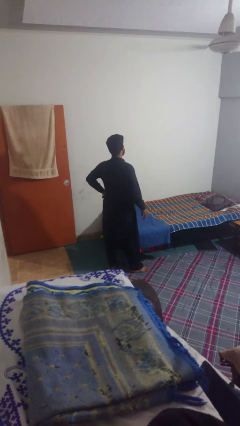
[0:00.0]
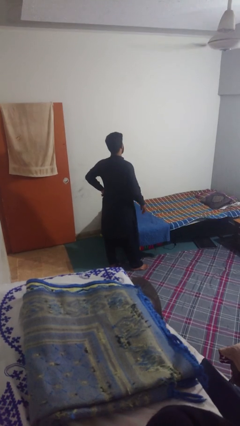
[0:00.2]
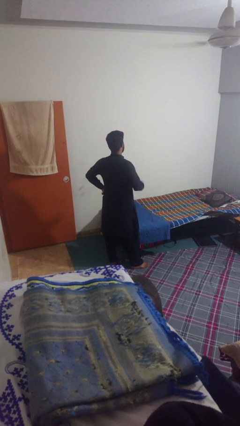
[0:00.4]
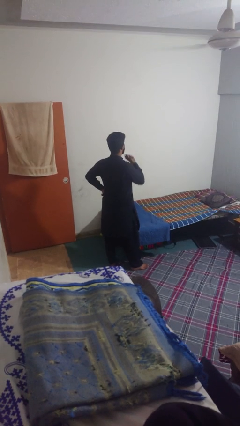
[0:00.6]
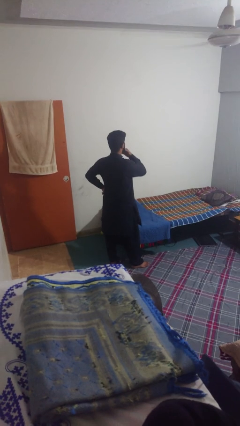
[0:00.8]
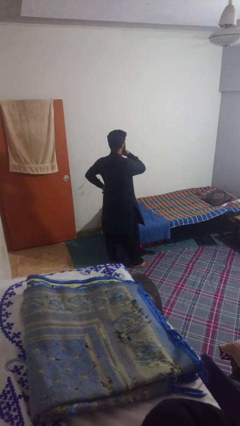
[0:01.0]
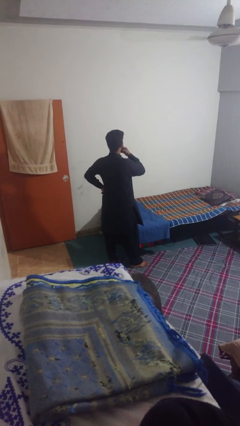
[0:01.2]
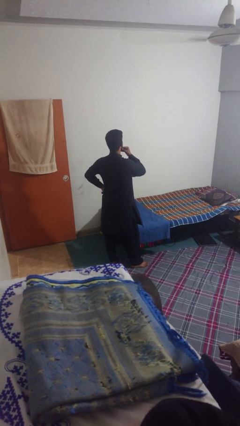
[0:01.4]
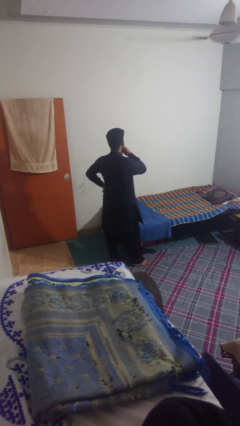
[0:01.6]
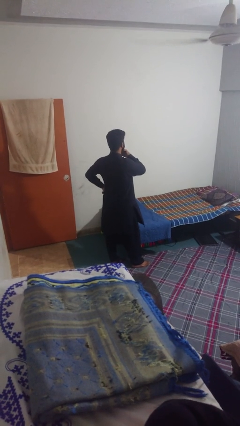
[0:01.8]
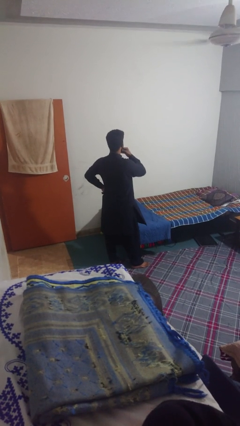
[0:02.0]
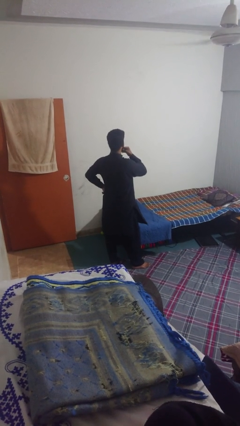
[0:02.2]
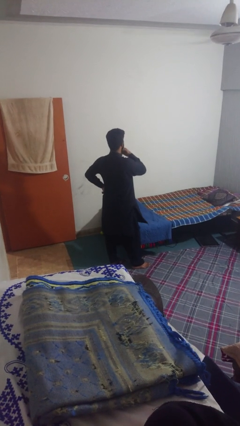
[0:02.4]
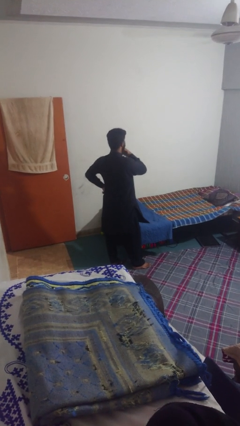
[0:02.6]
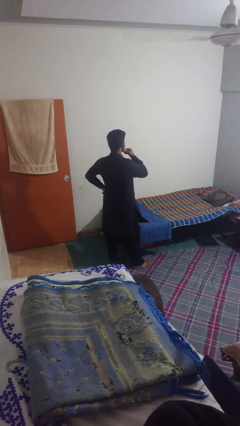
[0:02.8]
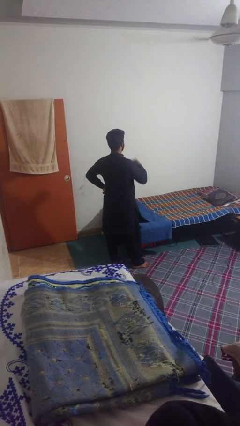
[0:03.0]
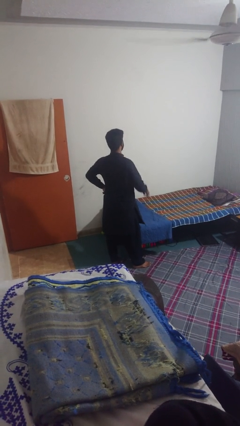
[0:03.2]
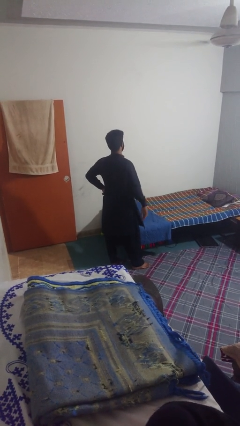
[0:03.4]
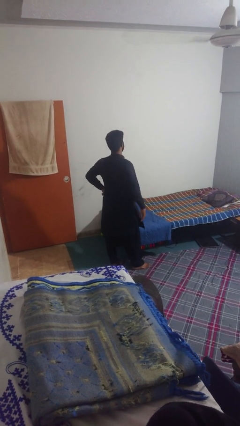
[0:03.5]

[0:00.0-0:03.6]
person strokes chin

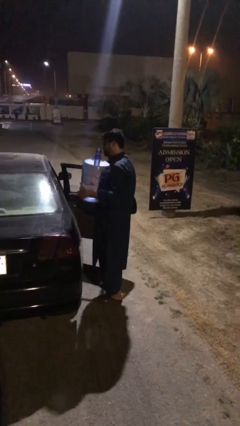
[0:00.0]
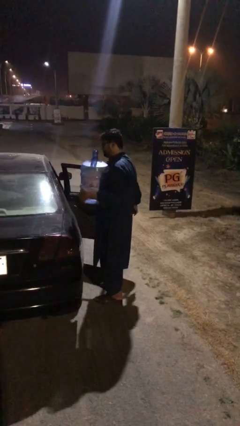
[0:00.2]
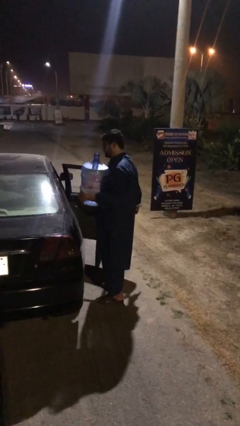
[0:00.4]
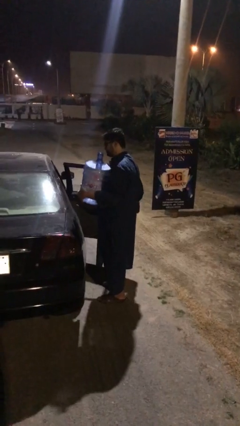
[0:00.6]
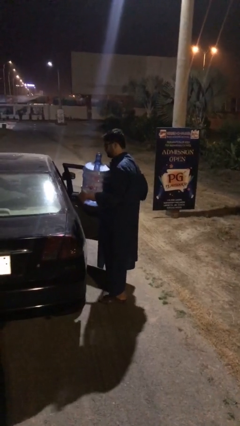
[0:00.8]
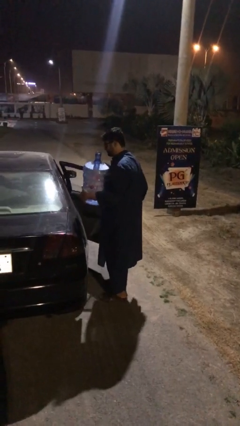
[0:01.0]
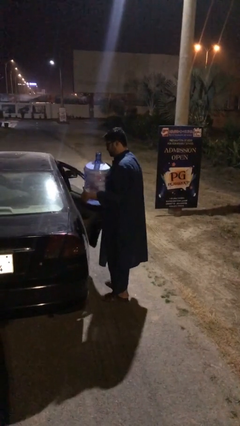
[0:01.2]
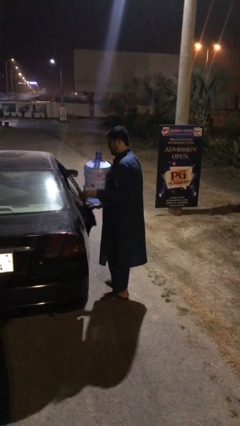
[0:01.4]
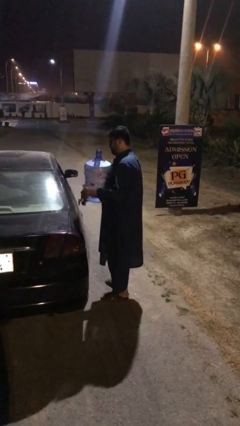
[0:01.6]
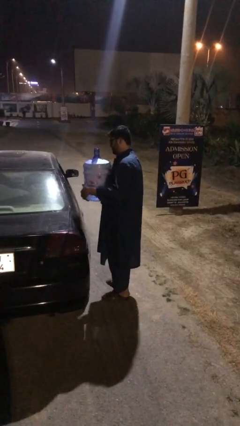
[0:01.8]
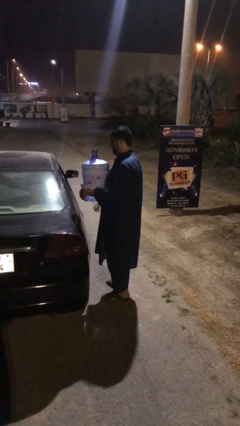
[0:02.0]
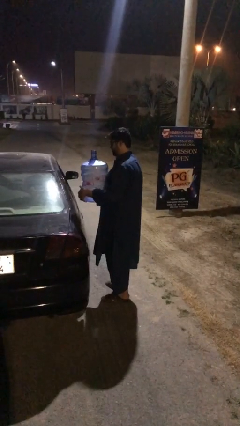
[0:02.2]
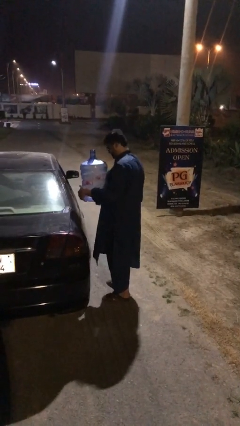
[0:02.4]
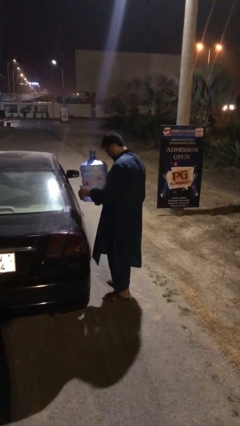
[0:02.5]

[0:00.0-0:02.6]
person closes car door

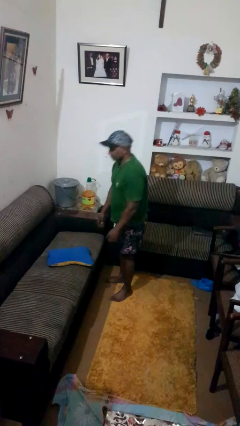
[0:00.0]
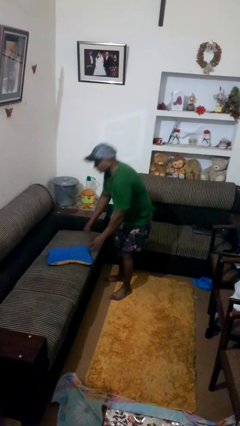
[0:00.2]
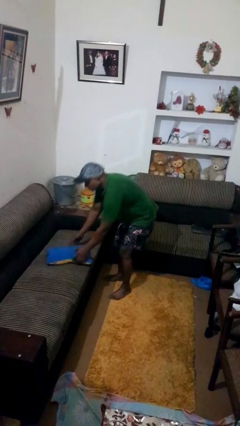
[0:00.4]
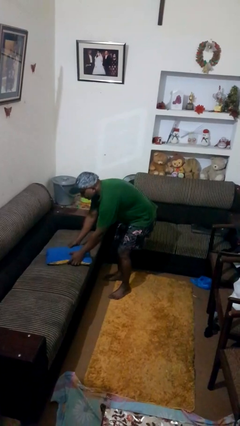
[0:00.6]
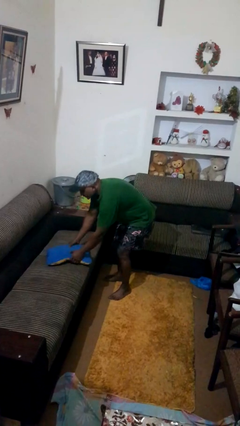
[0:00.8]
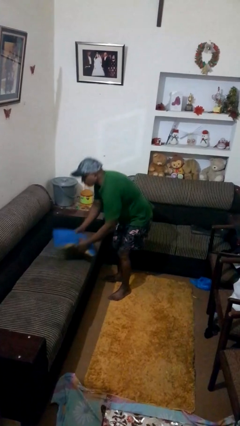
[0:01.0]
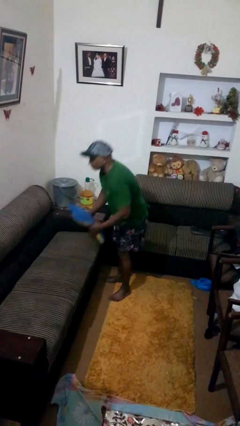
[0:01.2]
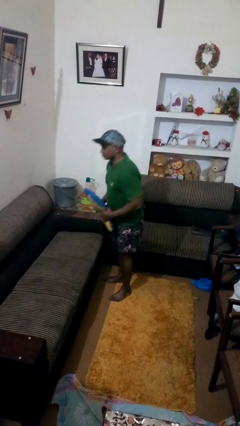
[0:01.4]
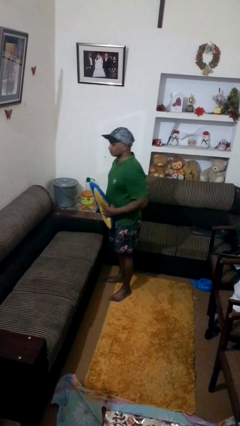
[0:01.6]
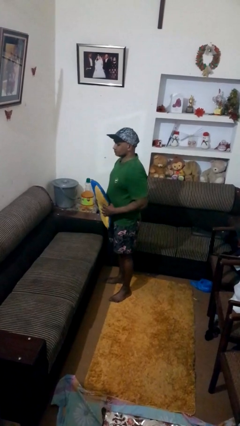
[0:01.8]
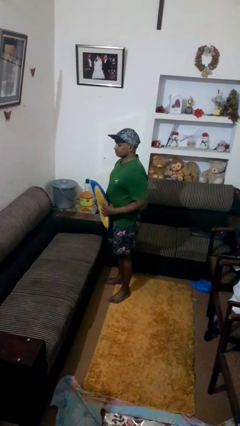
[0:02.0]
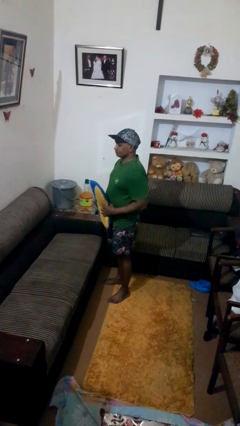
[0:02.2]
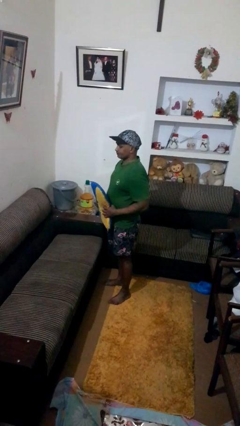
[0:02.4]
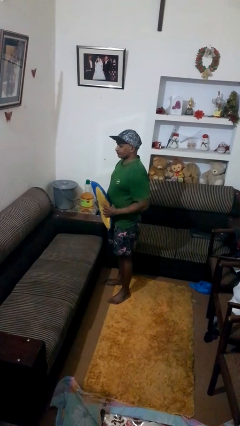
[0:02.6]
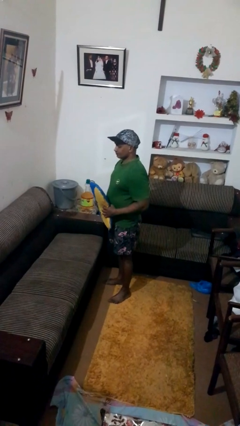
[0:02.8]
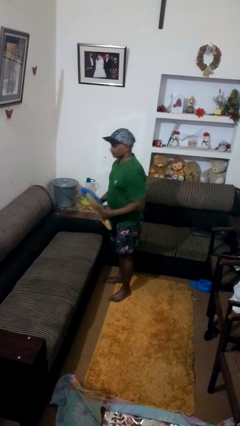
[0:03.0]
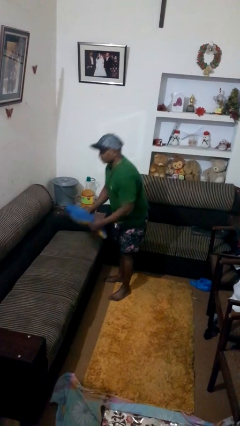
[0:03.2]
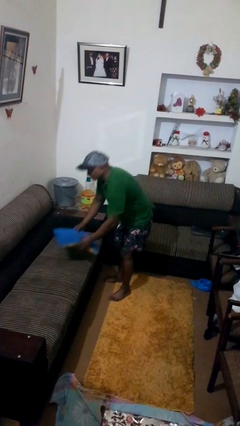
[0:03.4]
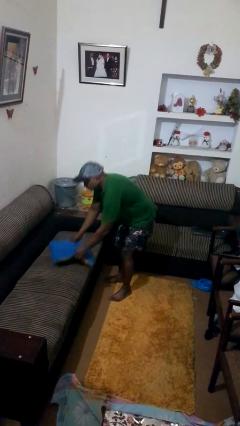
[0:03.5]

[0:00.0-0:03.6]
person picks up object from couch

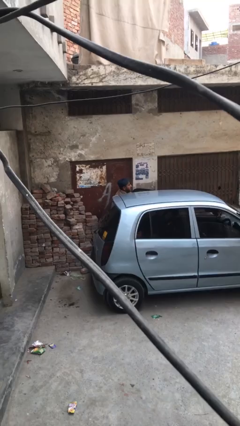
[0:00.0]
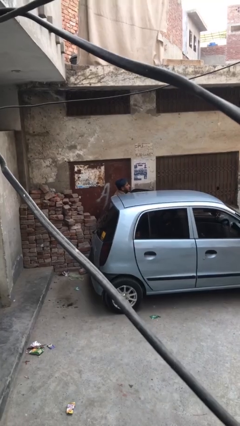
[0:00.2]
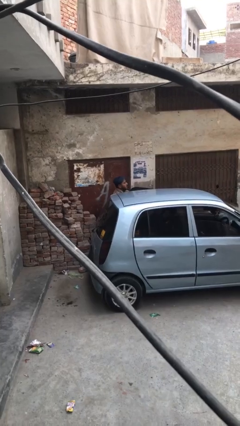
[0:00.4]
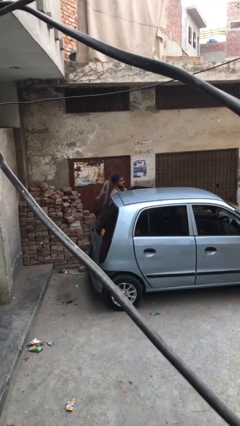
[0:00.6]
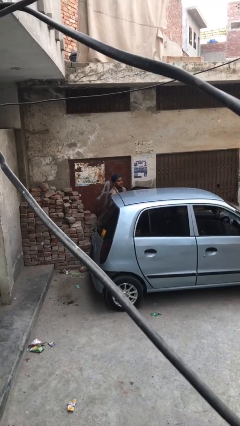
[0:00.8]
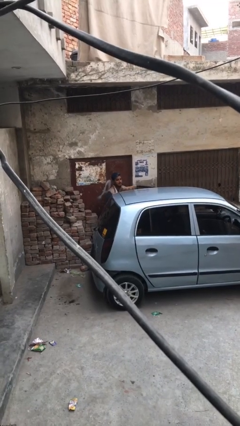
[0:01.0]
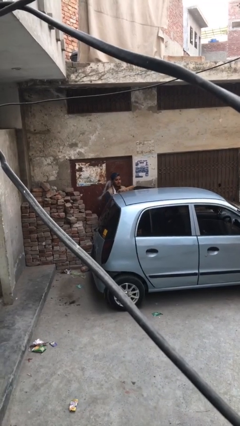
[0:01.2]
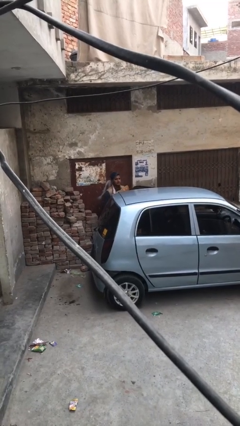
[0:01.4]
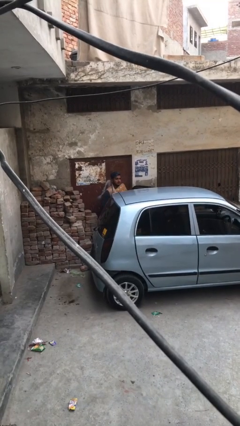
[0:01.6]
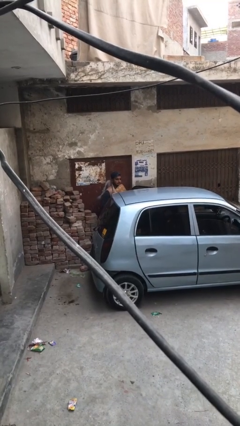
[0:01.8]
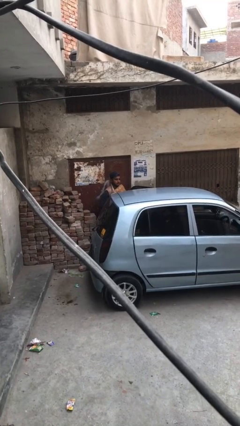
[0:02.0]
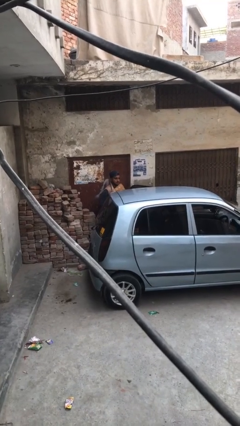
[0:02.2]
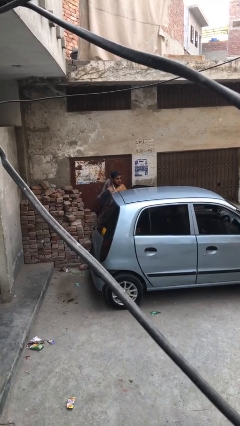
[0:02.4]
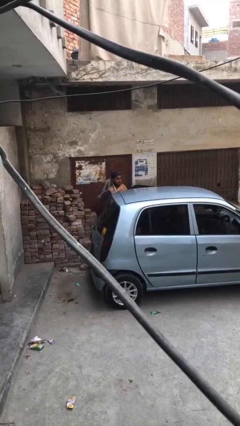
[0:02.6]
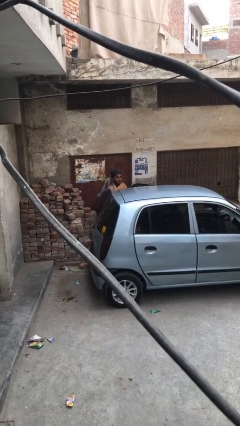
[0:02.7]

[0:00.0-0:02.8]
person unloads car

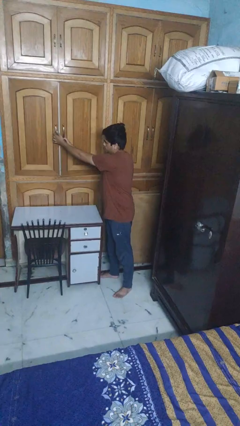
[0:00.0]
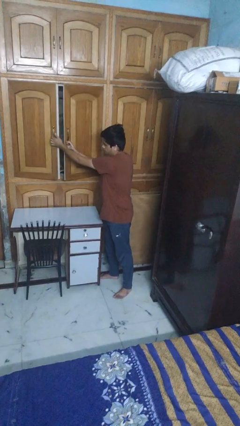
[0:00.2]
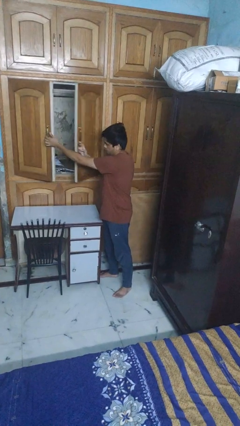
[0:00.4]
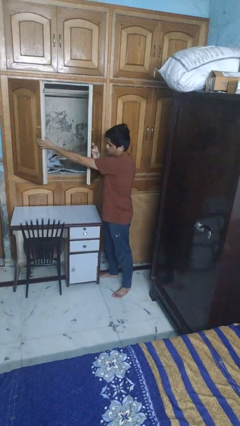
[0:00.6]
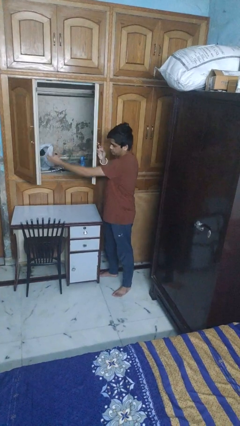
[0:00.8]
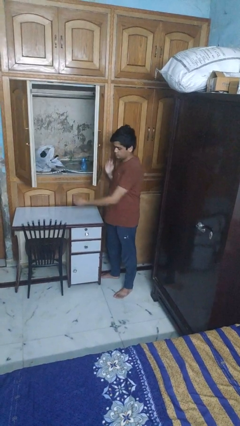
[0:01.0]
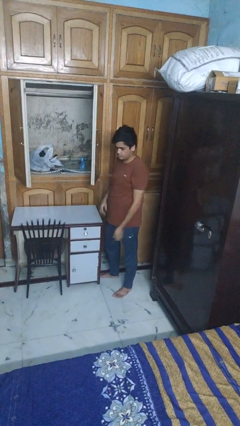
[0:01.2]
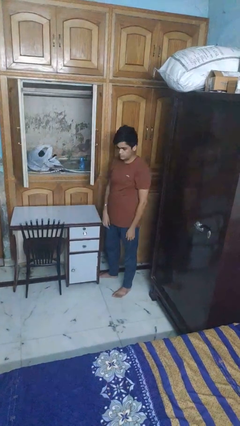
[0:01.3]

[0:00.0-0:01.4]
person opens closet door

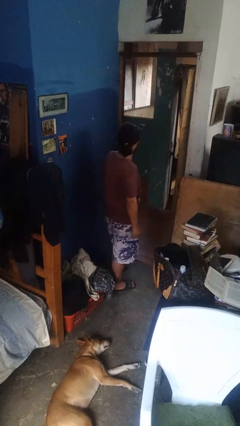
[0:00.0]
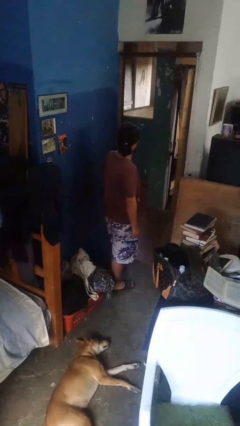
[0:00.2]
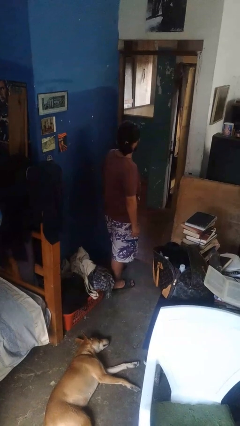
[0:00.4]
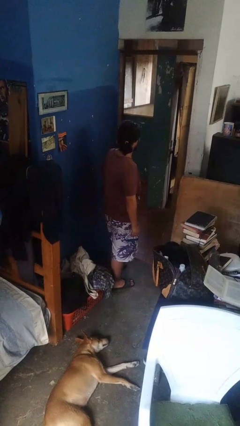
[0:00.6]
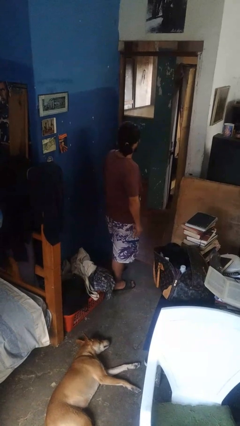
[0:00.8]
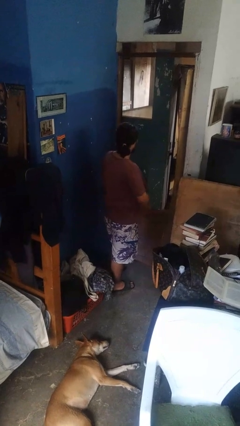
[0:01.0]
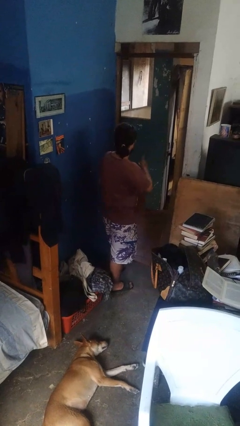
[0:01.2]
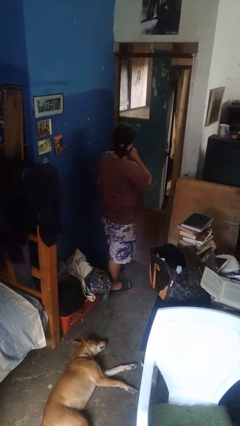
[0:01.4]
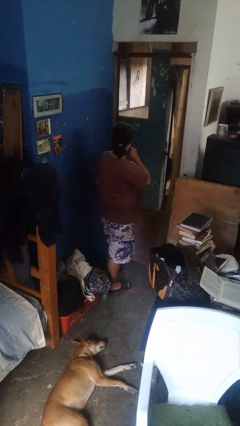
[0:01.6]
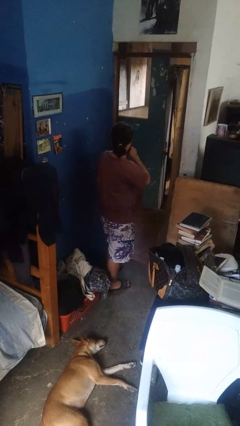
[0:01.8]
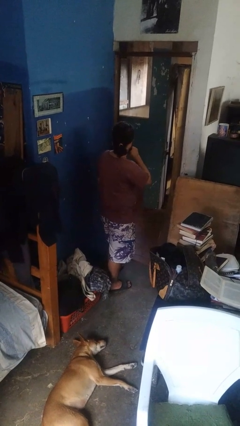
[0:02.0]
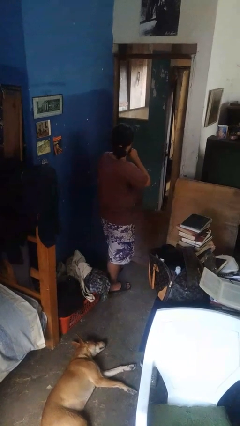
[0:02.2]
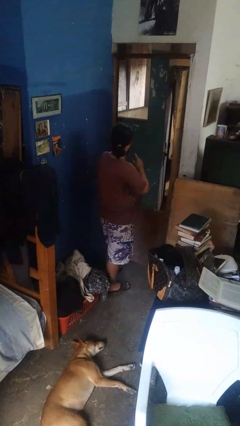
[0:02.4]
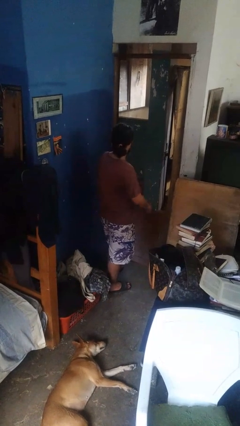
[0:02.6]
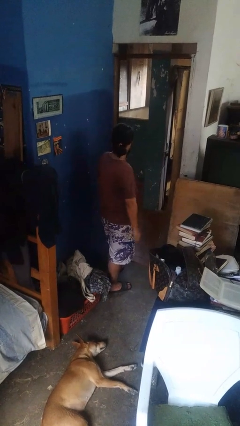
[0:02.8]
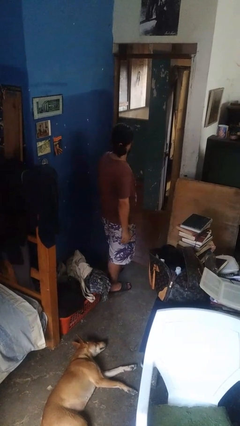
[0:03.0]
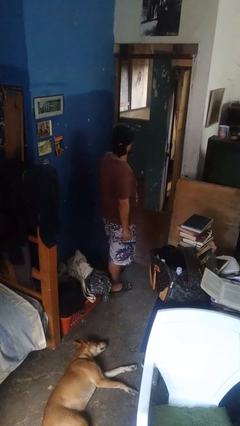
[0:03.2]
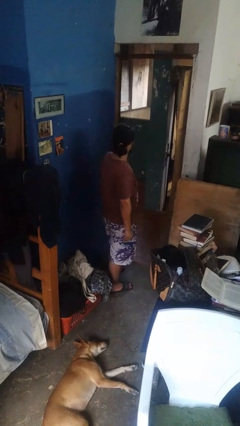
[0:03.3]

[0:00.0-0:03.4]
person gestures be quiet
